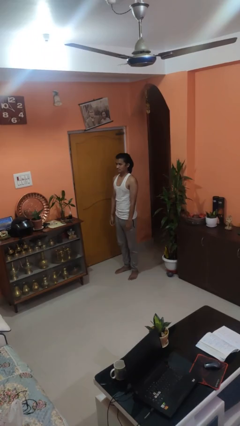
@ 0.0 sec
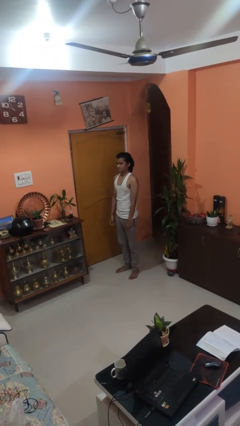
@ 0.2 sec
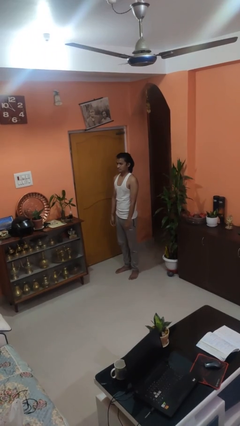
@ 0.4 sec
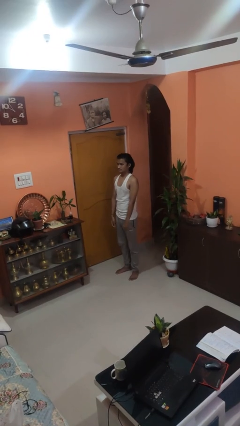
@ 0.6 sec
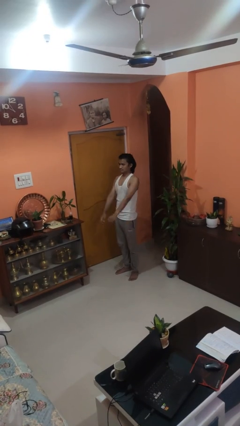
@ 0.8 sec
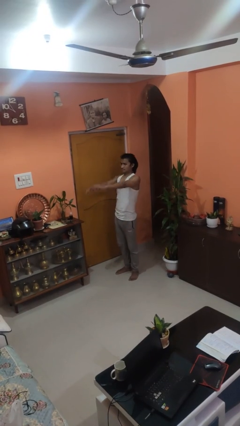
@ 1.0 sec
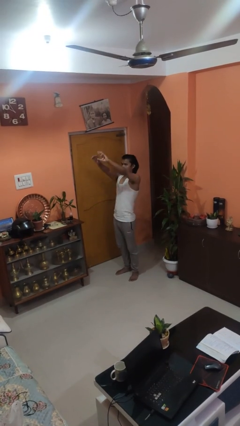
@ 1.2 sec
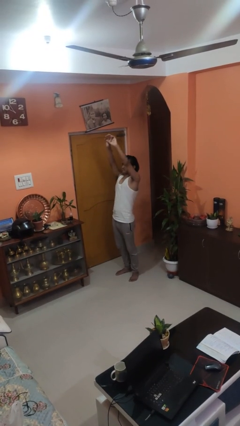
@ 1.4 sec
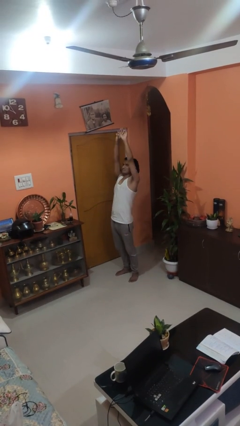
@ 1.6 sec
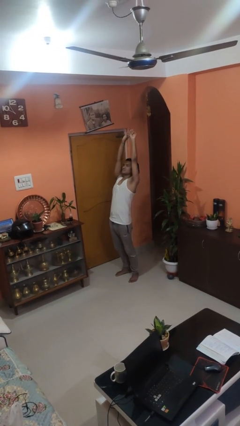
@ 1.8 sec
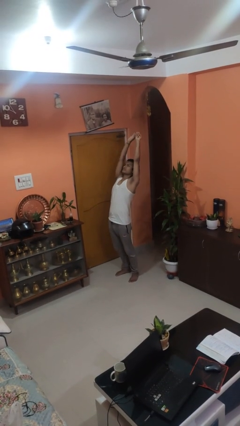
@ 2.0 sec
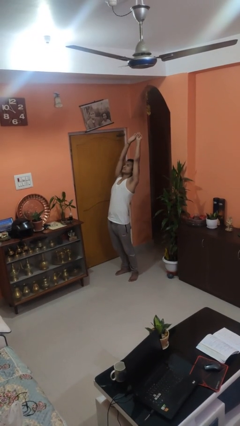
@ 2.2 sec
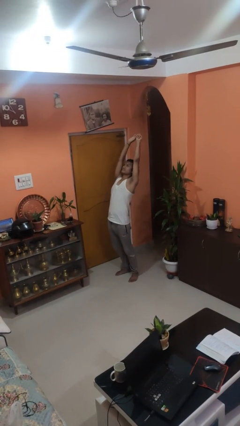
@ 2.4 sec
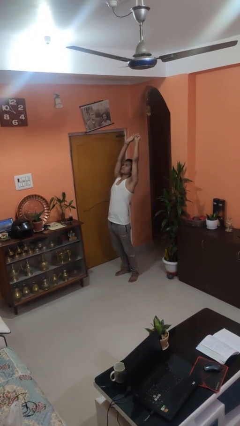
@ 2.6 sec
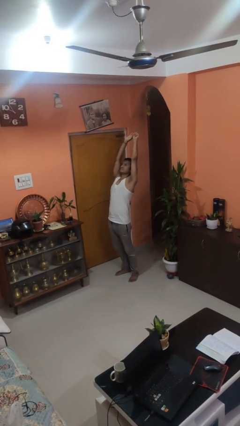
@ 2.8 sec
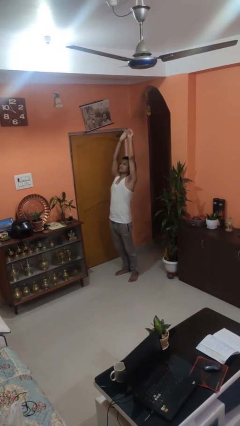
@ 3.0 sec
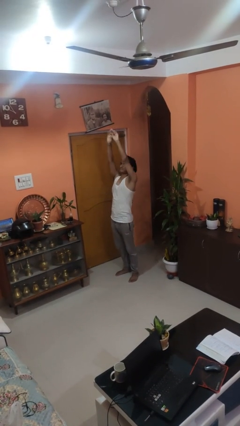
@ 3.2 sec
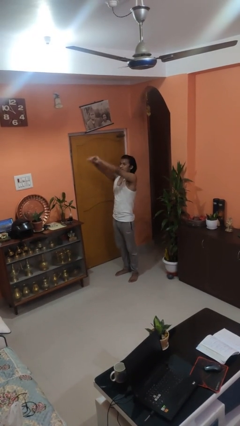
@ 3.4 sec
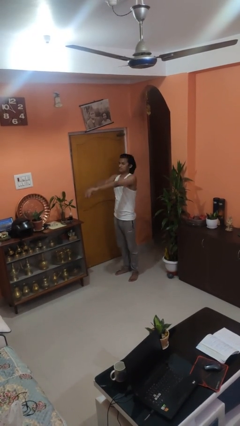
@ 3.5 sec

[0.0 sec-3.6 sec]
person stretches arms over head

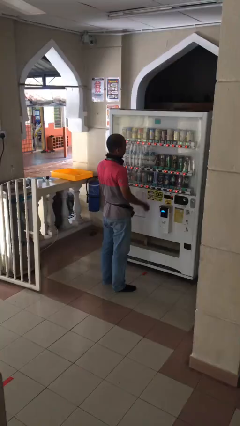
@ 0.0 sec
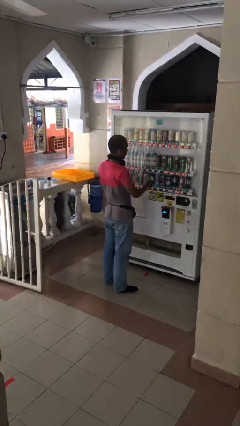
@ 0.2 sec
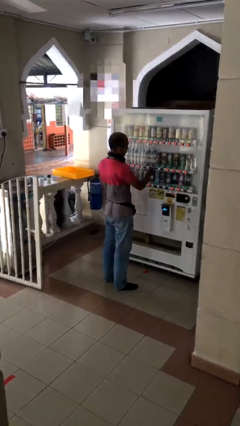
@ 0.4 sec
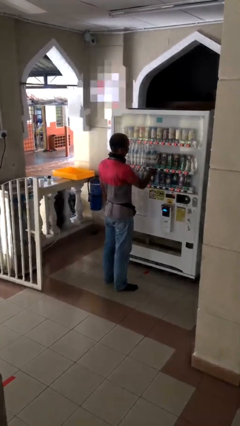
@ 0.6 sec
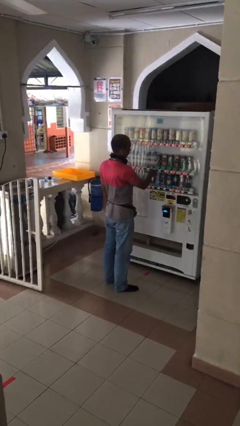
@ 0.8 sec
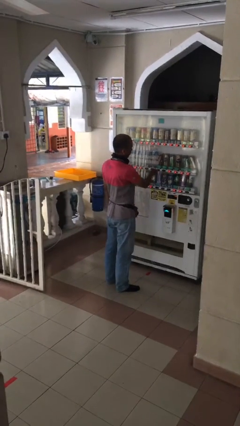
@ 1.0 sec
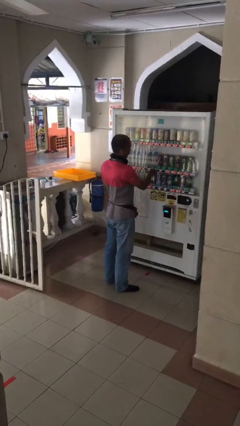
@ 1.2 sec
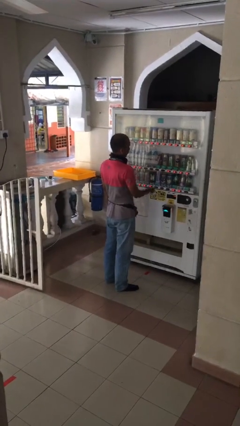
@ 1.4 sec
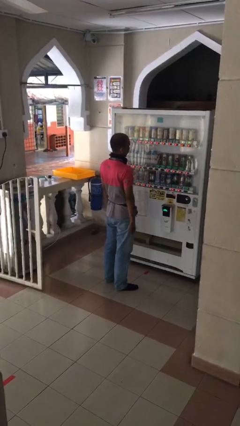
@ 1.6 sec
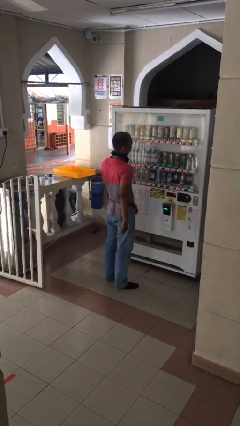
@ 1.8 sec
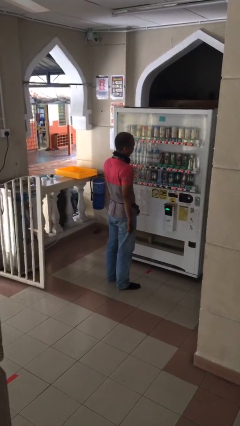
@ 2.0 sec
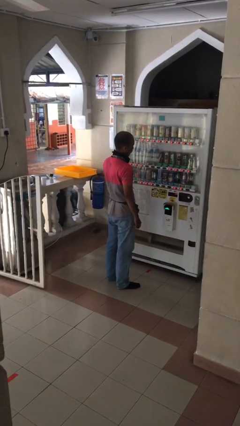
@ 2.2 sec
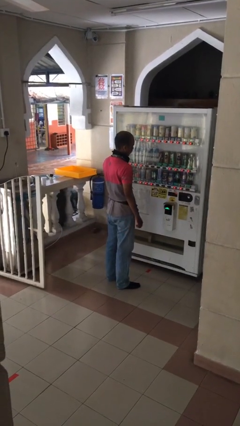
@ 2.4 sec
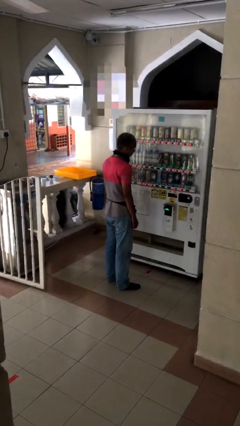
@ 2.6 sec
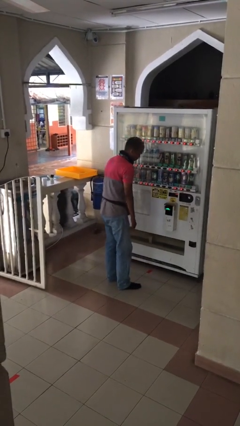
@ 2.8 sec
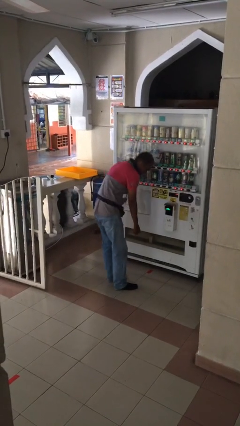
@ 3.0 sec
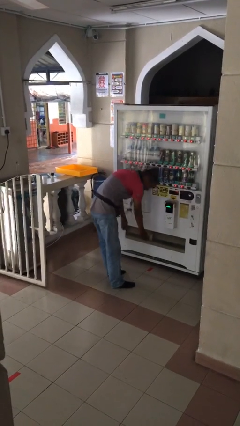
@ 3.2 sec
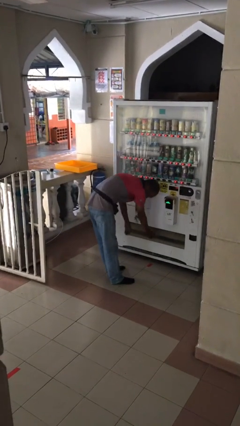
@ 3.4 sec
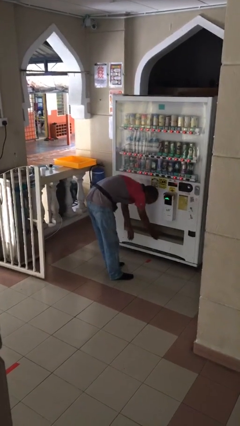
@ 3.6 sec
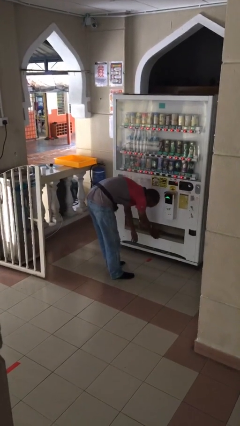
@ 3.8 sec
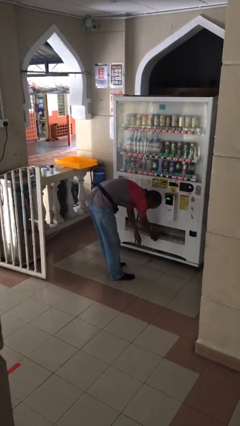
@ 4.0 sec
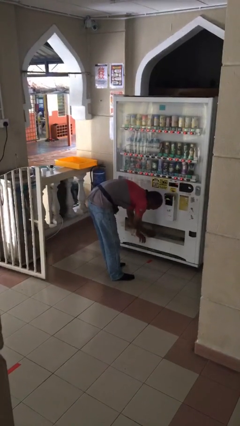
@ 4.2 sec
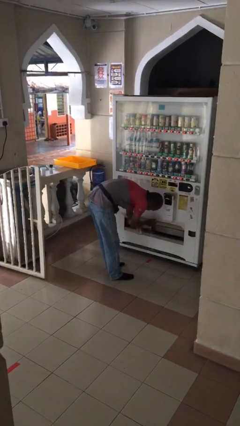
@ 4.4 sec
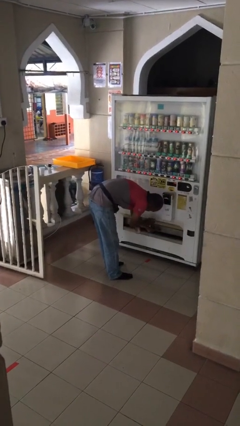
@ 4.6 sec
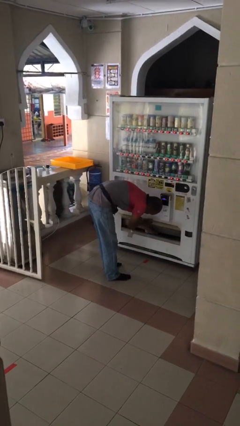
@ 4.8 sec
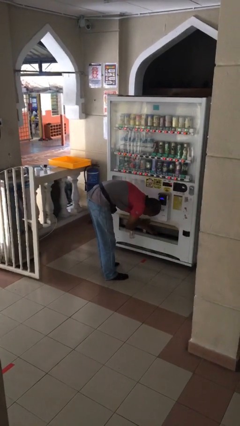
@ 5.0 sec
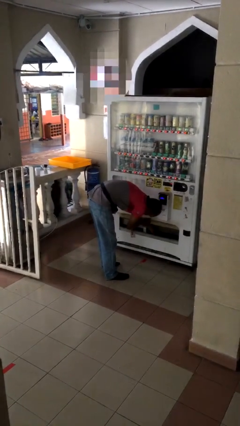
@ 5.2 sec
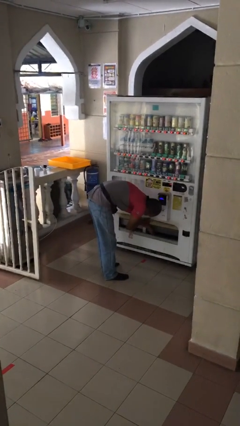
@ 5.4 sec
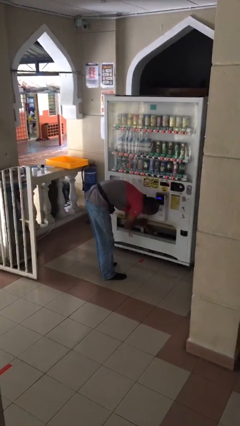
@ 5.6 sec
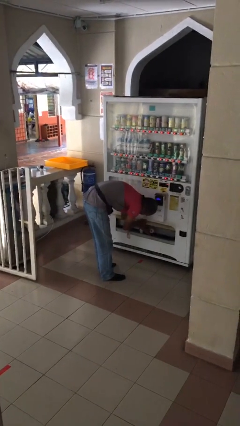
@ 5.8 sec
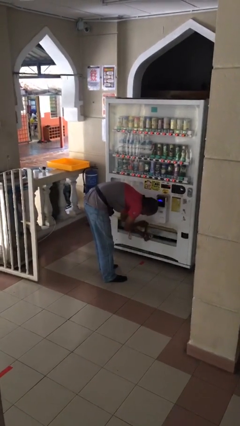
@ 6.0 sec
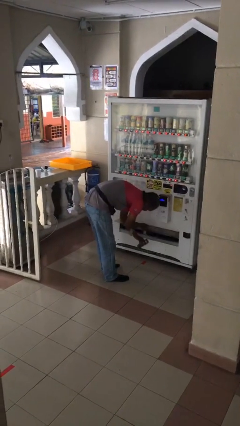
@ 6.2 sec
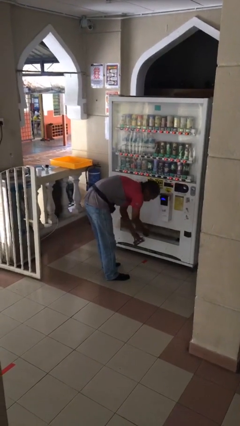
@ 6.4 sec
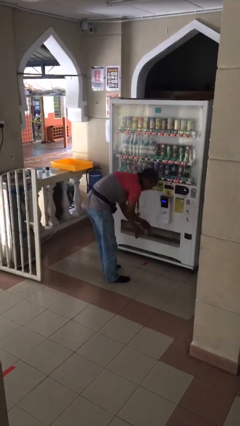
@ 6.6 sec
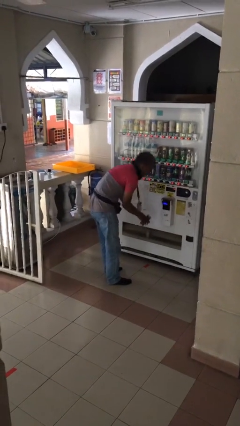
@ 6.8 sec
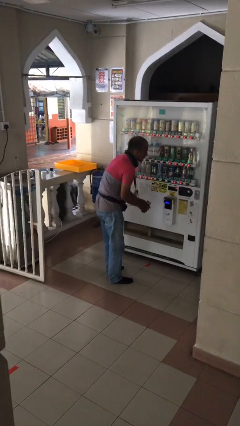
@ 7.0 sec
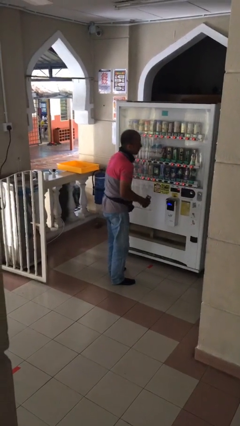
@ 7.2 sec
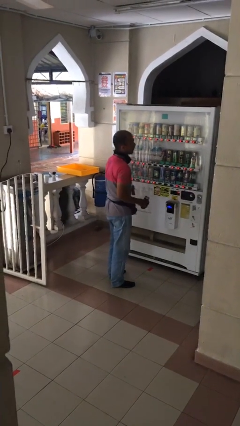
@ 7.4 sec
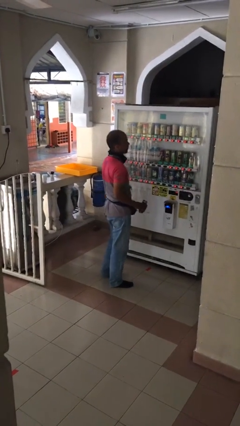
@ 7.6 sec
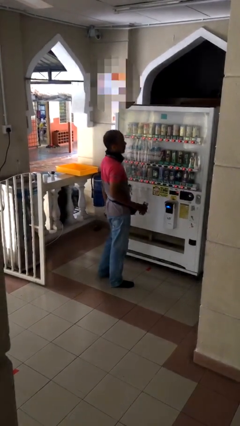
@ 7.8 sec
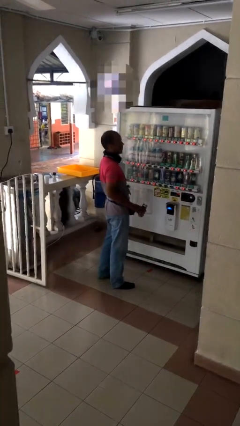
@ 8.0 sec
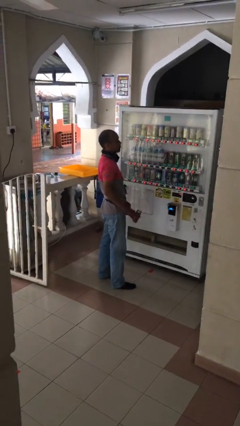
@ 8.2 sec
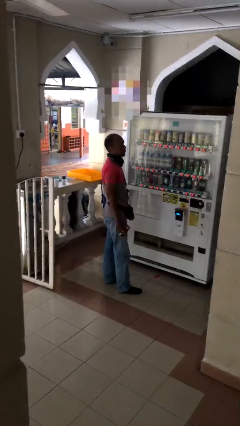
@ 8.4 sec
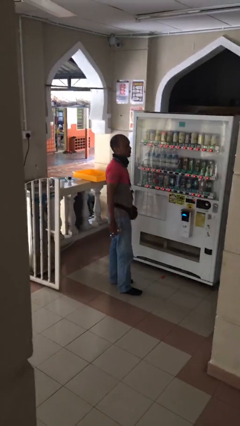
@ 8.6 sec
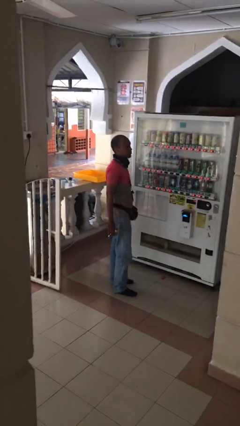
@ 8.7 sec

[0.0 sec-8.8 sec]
person purchases from machine

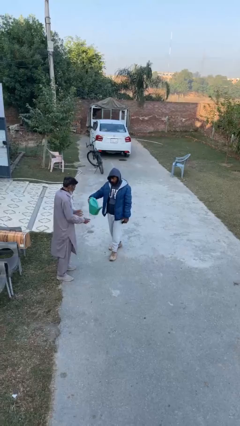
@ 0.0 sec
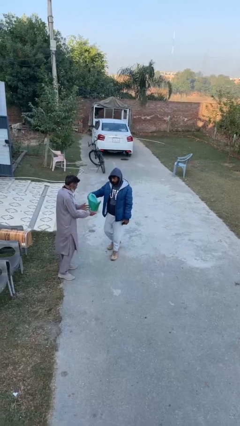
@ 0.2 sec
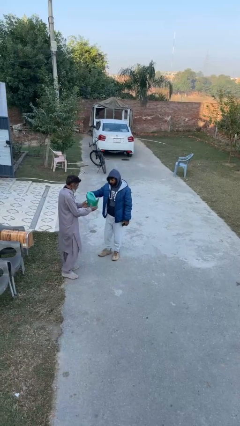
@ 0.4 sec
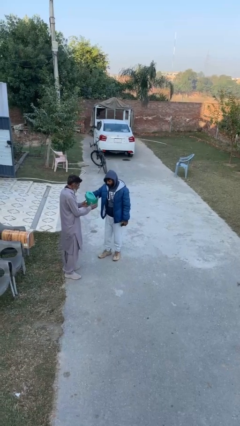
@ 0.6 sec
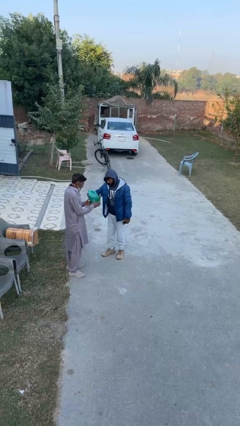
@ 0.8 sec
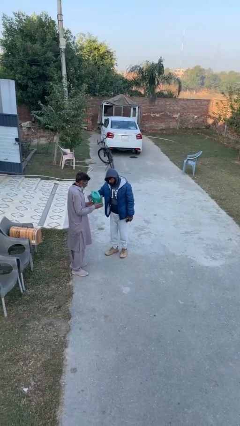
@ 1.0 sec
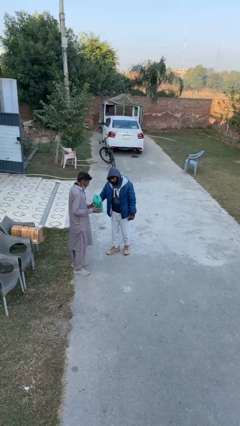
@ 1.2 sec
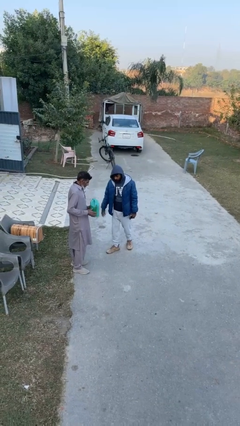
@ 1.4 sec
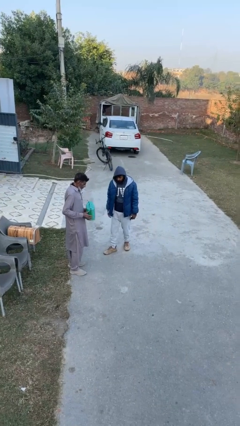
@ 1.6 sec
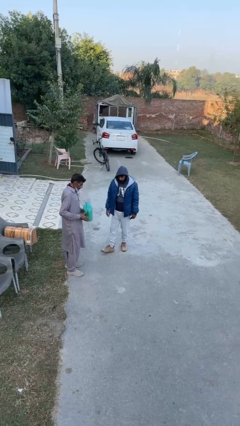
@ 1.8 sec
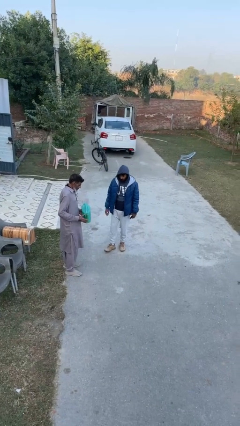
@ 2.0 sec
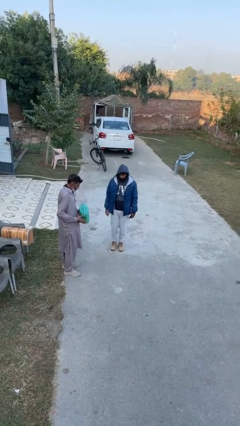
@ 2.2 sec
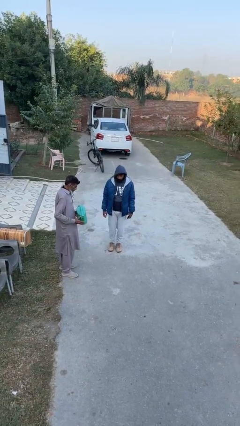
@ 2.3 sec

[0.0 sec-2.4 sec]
person transfers object to person

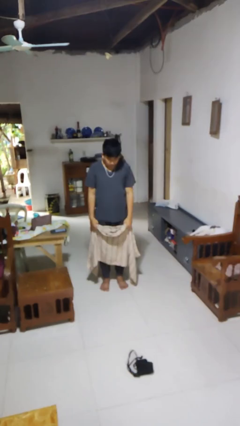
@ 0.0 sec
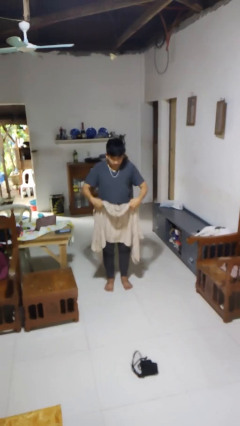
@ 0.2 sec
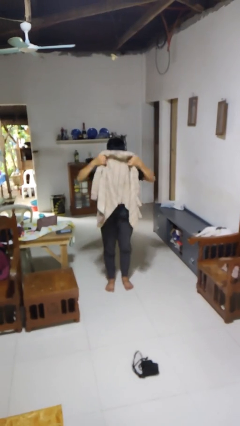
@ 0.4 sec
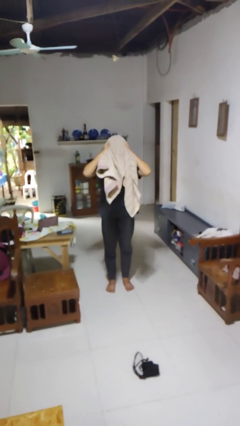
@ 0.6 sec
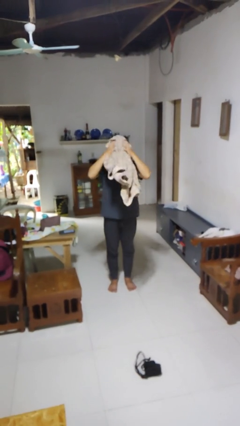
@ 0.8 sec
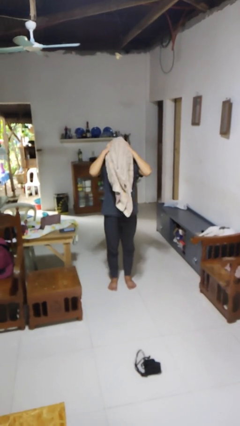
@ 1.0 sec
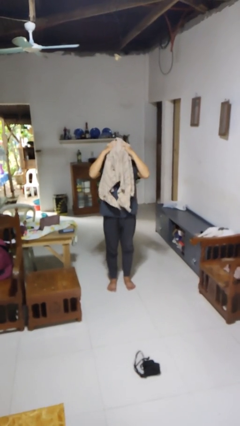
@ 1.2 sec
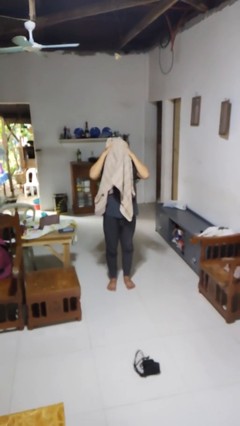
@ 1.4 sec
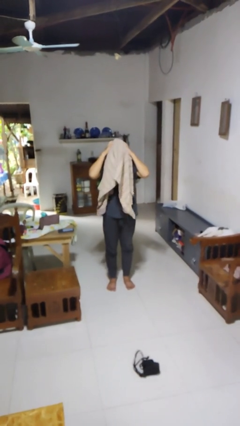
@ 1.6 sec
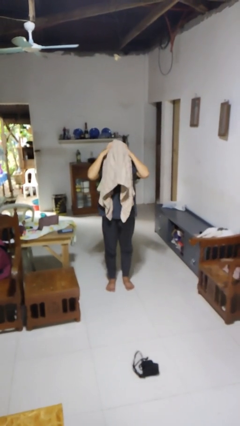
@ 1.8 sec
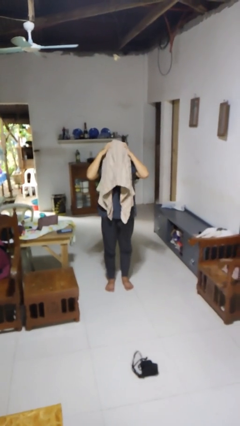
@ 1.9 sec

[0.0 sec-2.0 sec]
person dries hair with towel

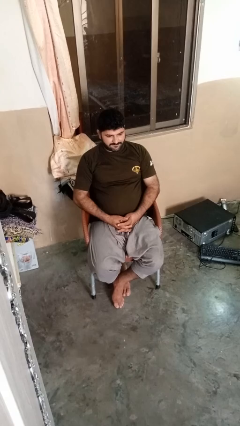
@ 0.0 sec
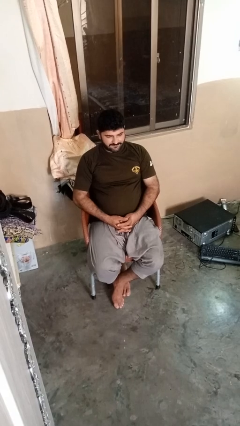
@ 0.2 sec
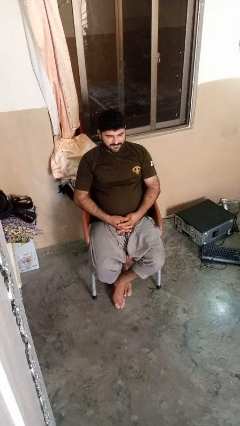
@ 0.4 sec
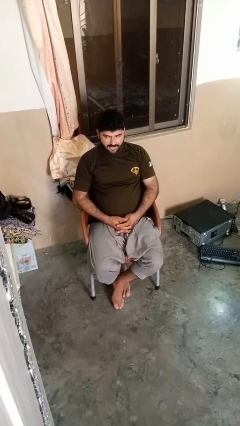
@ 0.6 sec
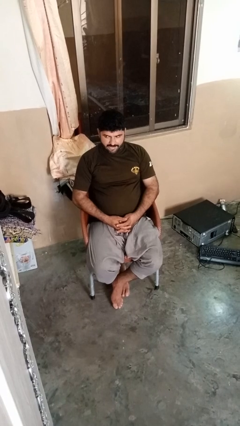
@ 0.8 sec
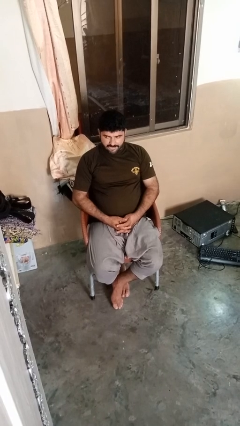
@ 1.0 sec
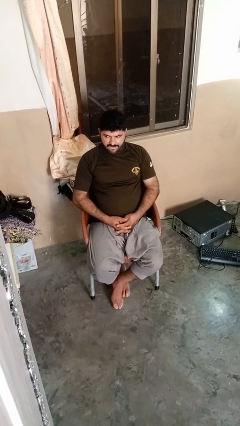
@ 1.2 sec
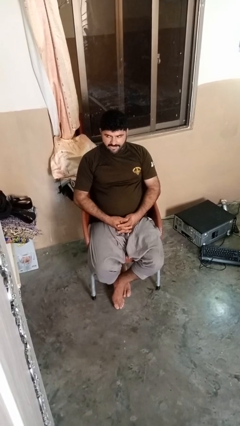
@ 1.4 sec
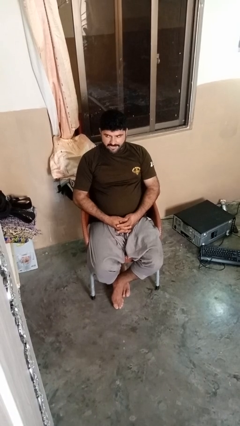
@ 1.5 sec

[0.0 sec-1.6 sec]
person sticks out tongue
